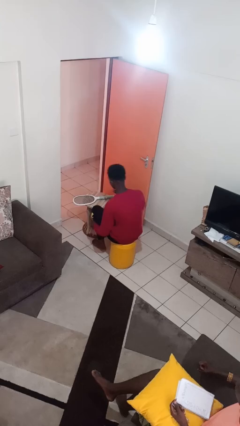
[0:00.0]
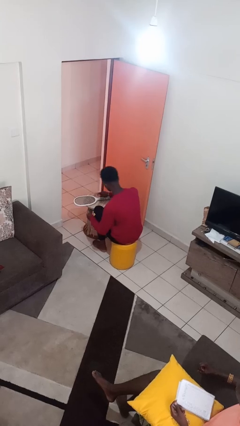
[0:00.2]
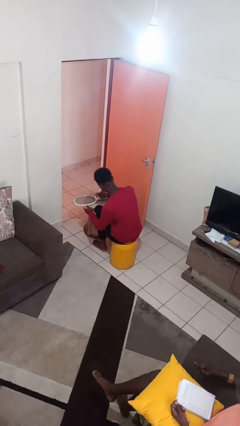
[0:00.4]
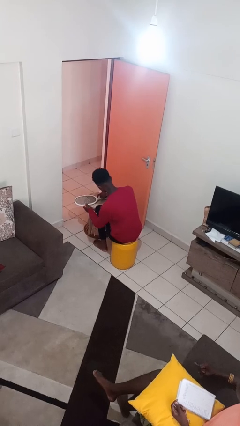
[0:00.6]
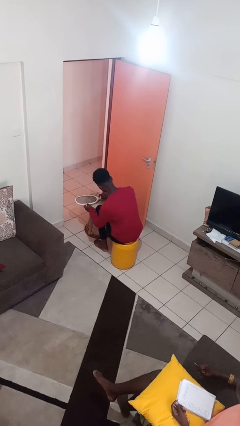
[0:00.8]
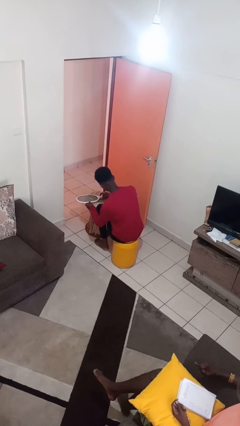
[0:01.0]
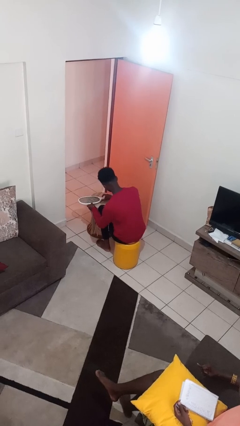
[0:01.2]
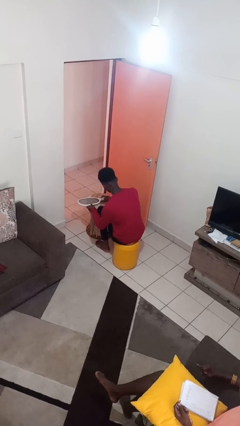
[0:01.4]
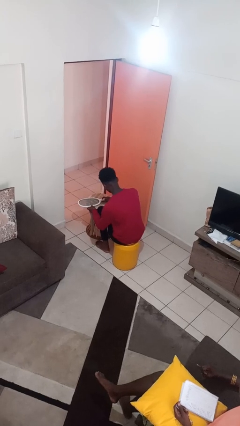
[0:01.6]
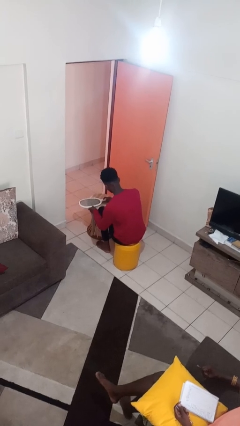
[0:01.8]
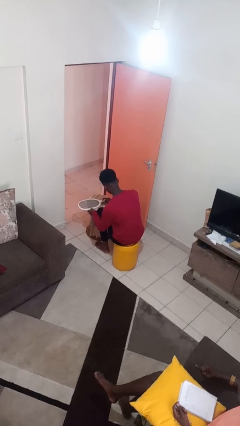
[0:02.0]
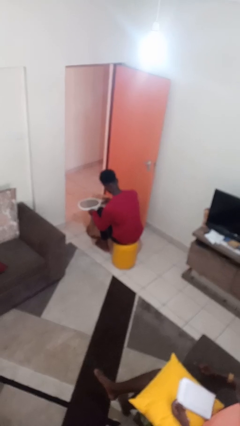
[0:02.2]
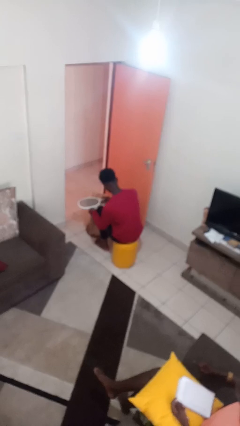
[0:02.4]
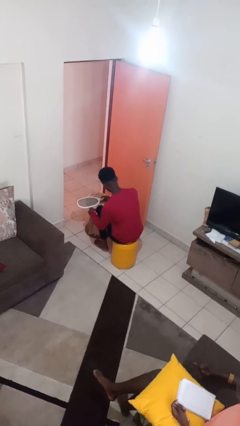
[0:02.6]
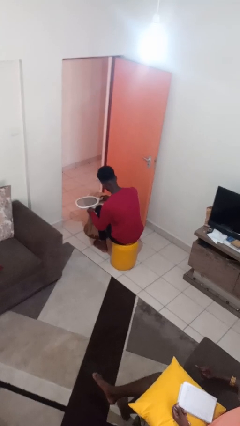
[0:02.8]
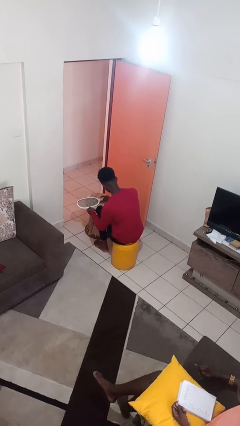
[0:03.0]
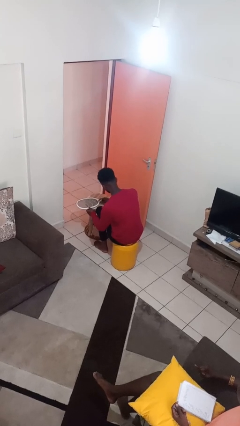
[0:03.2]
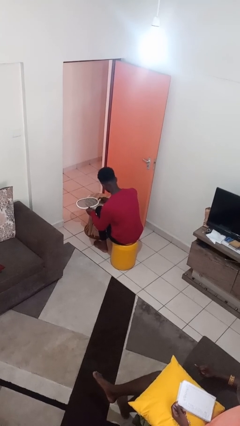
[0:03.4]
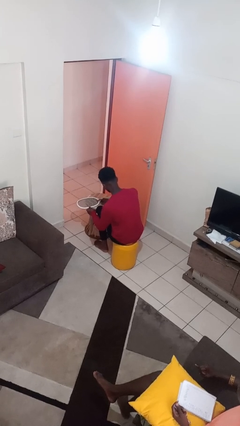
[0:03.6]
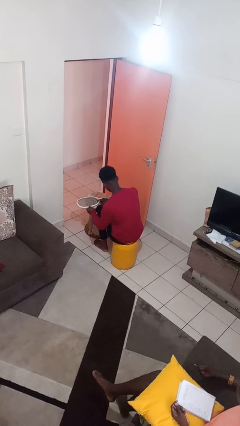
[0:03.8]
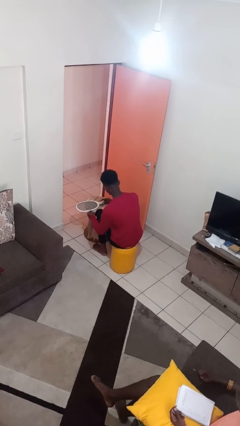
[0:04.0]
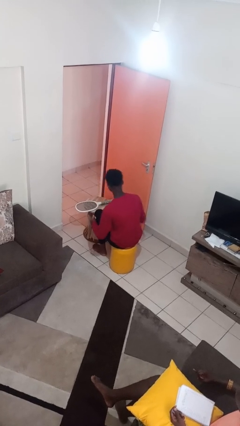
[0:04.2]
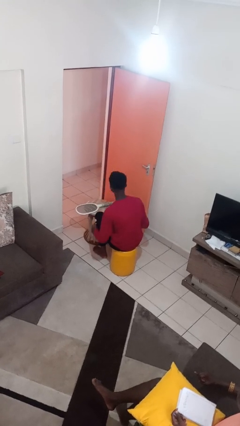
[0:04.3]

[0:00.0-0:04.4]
person taps object with finger

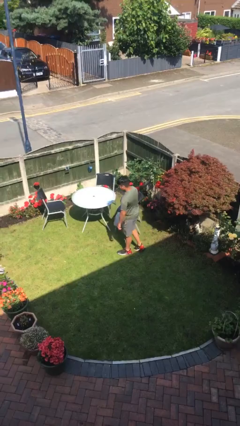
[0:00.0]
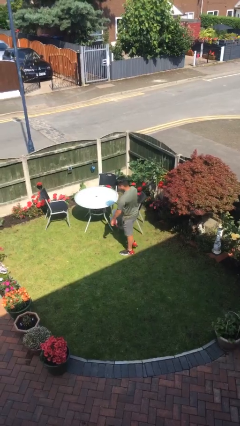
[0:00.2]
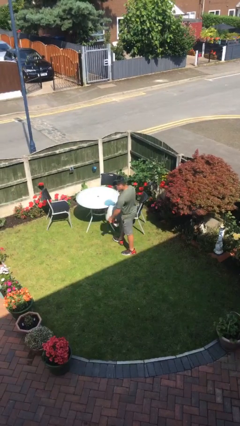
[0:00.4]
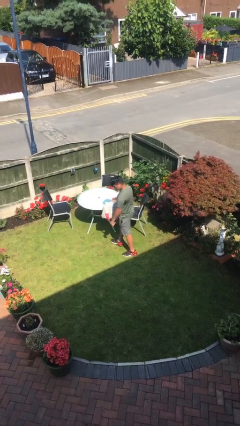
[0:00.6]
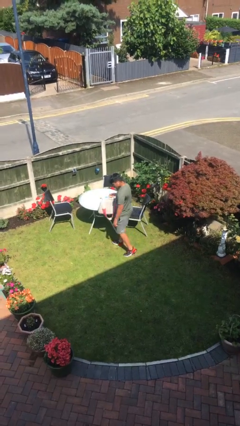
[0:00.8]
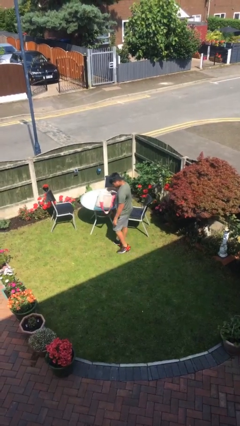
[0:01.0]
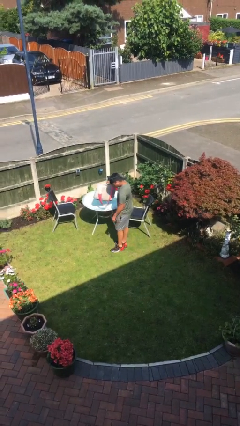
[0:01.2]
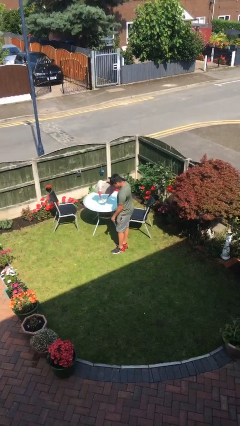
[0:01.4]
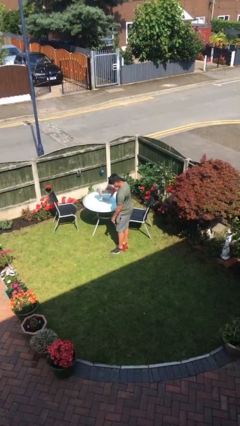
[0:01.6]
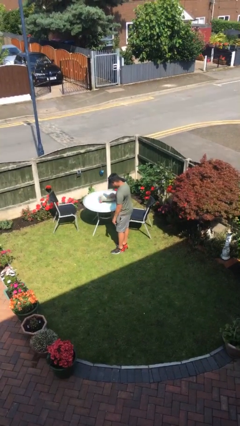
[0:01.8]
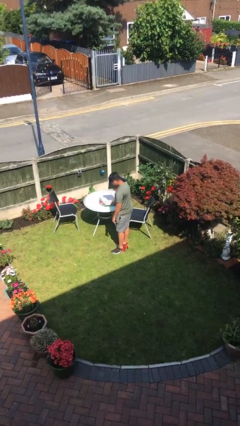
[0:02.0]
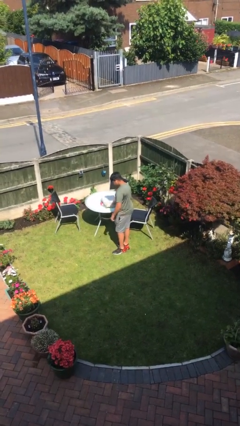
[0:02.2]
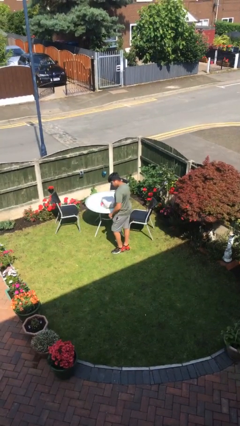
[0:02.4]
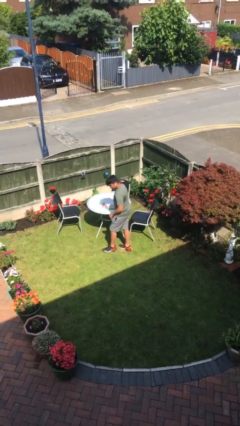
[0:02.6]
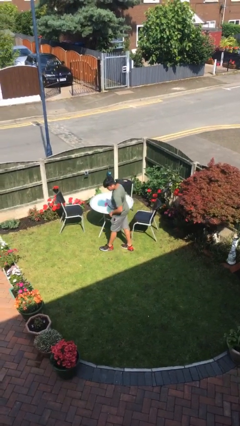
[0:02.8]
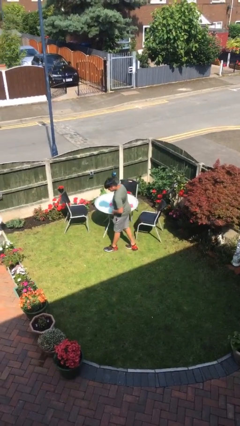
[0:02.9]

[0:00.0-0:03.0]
person puts down object on table

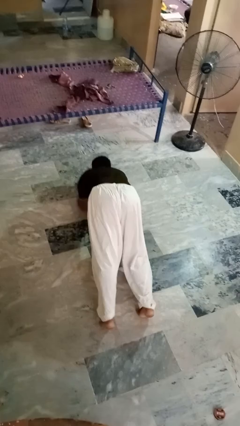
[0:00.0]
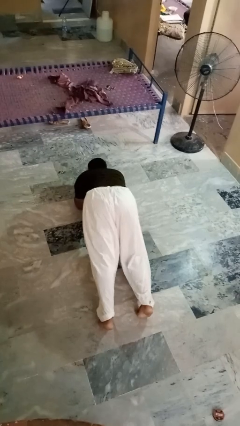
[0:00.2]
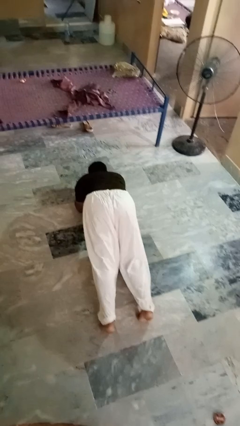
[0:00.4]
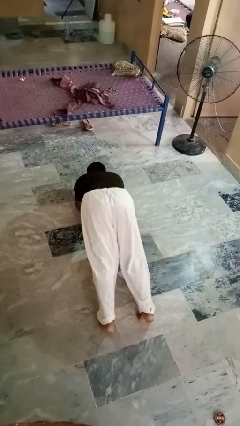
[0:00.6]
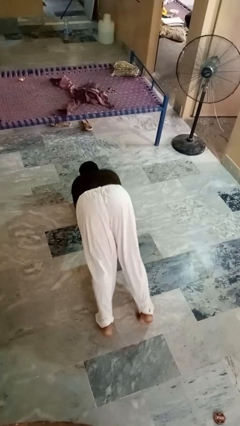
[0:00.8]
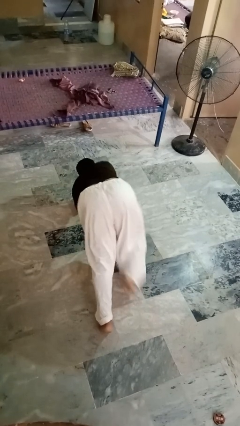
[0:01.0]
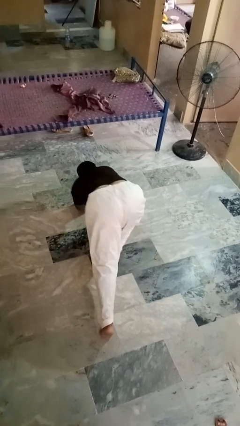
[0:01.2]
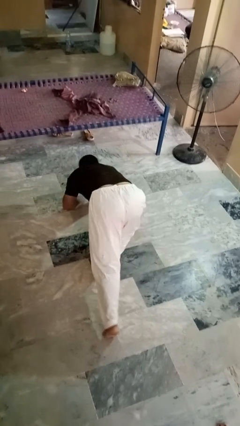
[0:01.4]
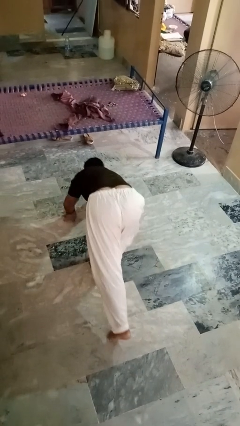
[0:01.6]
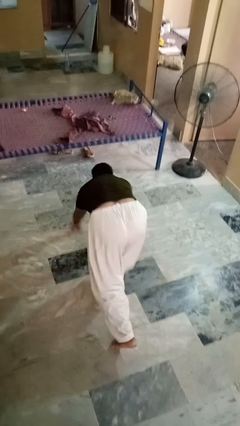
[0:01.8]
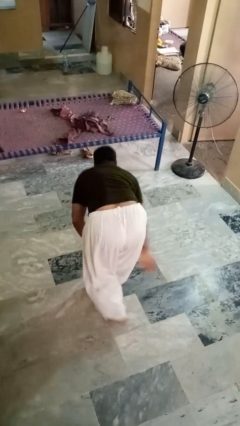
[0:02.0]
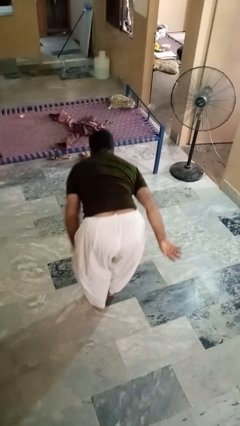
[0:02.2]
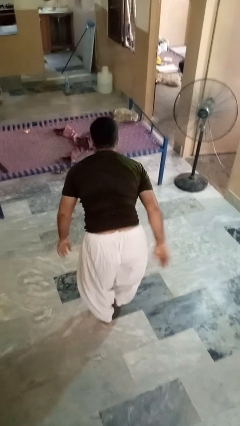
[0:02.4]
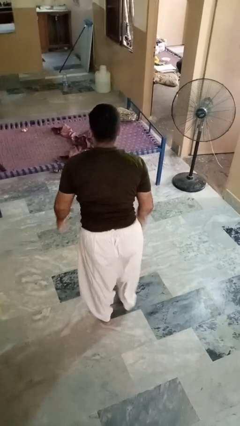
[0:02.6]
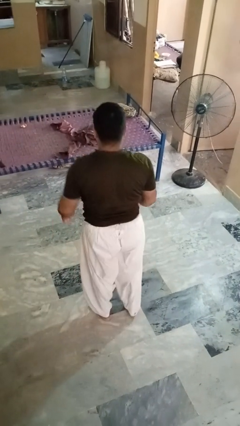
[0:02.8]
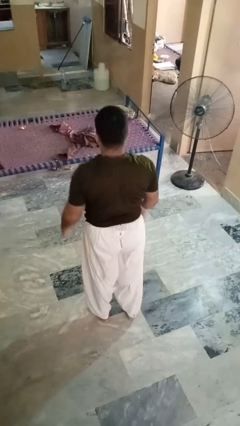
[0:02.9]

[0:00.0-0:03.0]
person stands up from floor

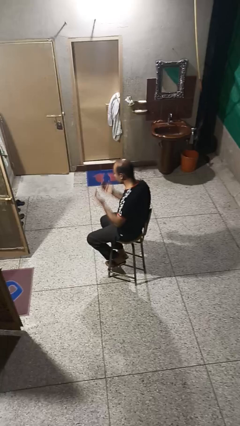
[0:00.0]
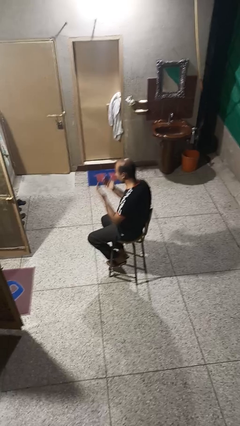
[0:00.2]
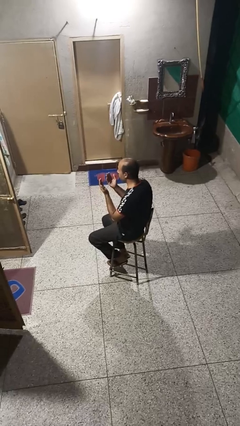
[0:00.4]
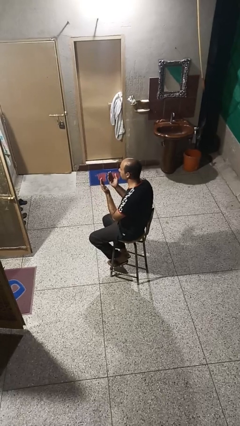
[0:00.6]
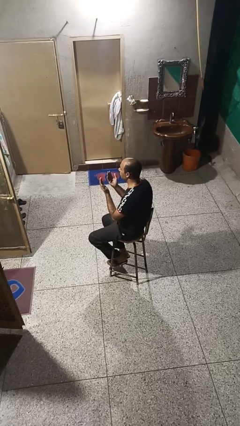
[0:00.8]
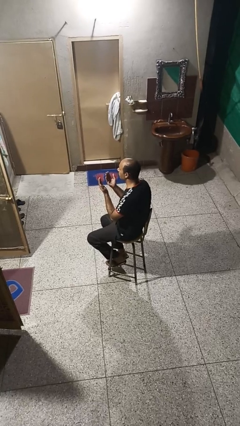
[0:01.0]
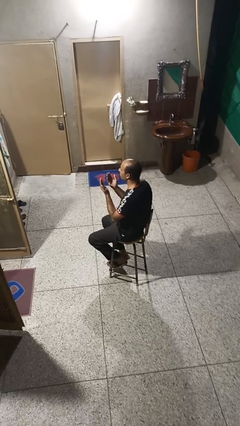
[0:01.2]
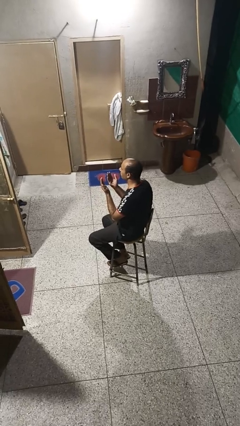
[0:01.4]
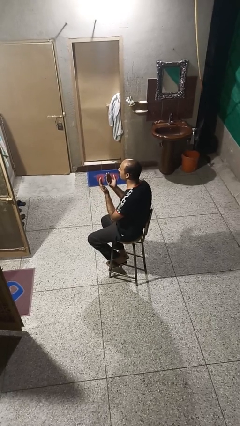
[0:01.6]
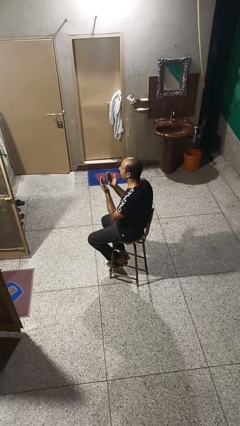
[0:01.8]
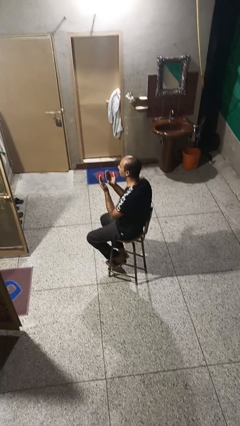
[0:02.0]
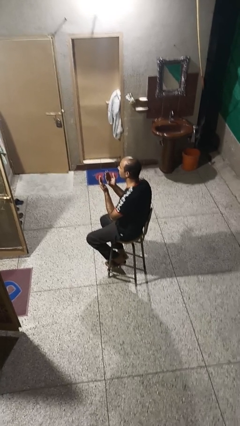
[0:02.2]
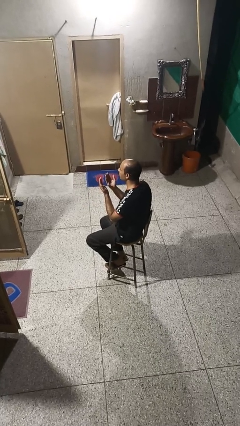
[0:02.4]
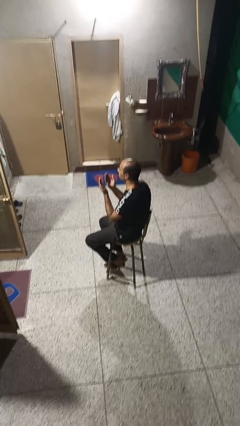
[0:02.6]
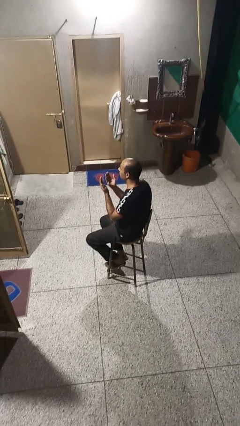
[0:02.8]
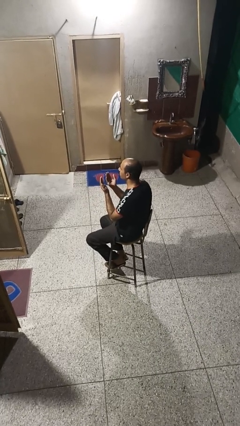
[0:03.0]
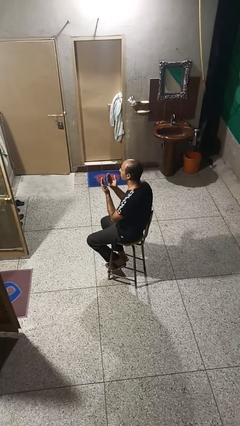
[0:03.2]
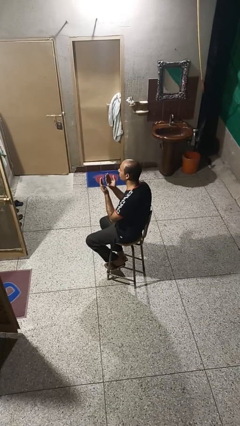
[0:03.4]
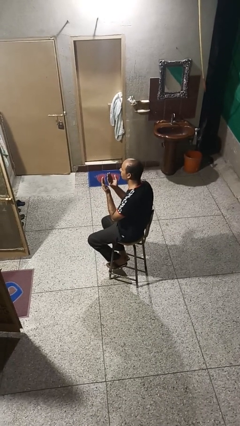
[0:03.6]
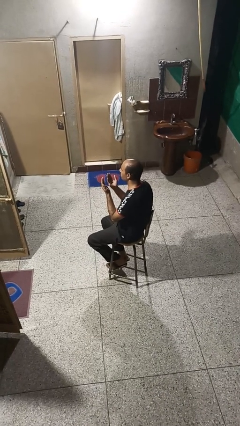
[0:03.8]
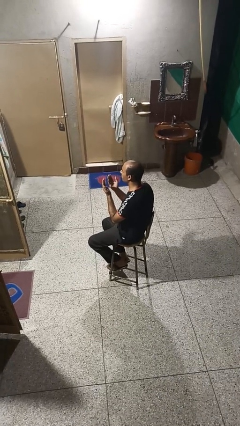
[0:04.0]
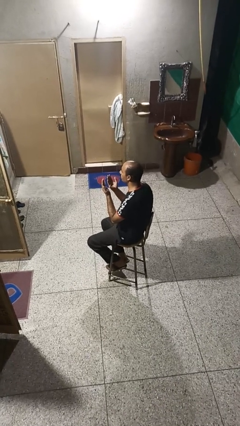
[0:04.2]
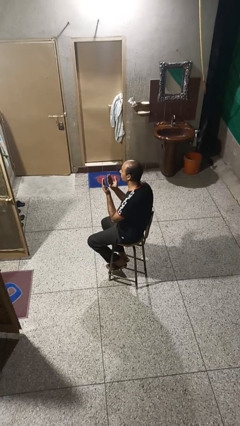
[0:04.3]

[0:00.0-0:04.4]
person prays

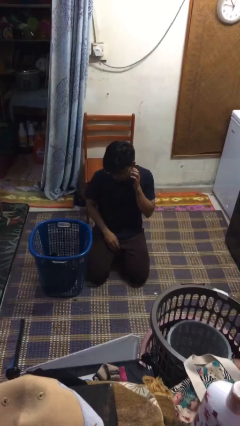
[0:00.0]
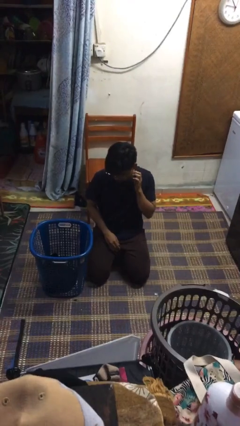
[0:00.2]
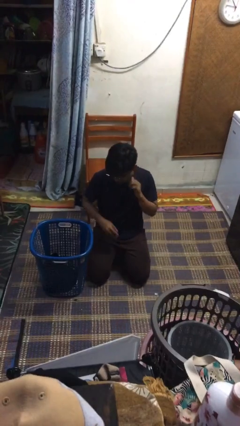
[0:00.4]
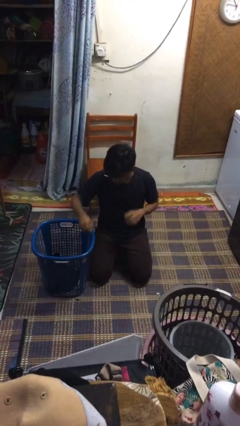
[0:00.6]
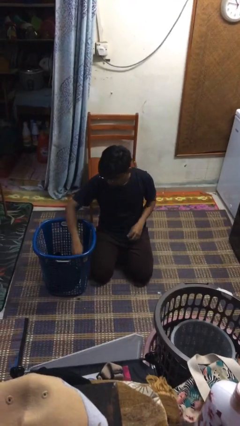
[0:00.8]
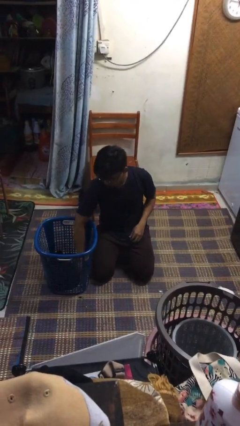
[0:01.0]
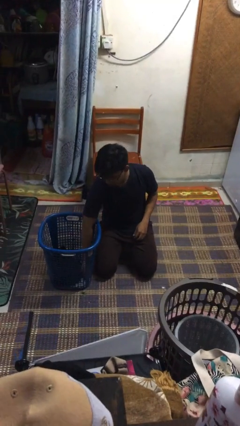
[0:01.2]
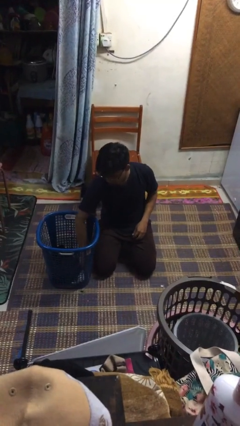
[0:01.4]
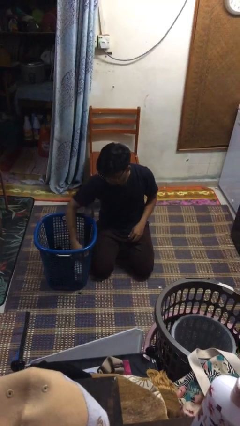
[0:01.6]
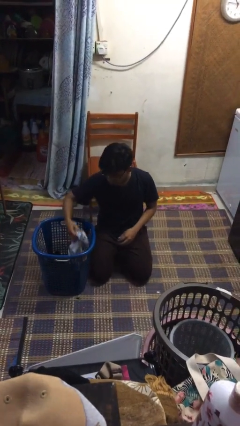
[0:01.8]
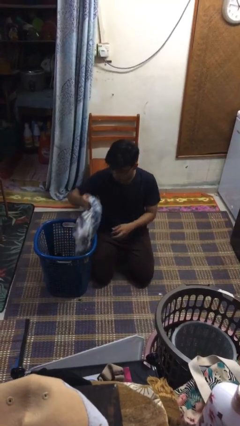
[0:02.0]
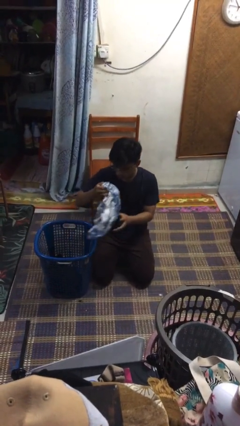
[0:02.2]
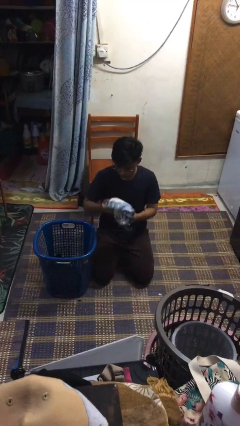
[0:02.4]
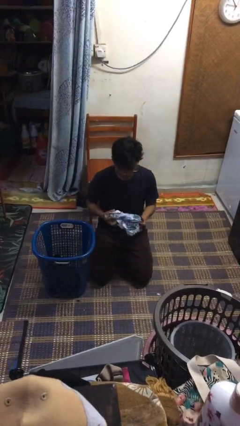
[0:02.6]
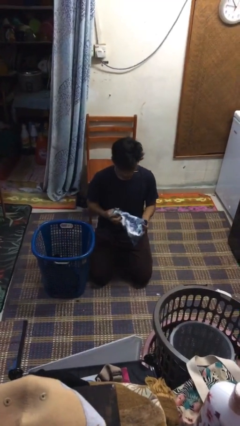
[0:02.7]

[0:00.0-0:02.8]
person takes object from basket
